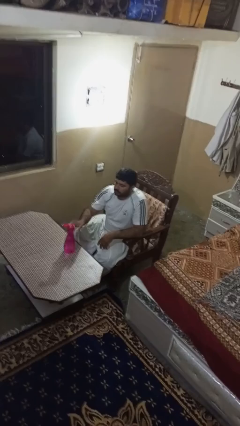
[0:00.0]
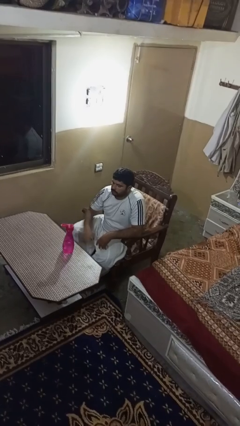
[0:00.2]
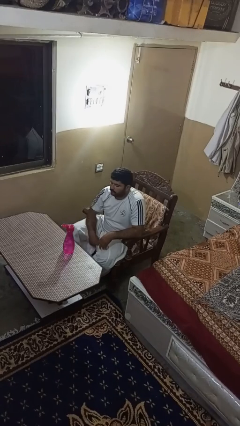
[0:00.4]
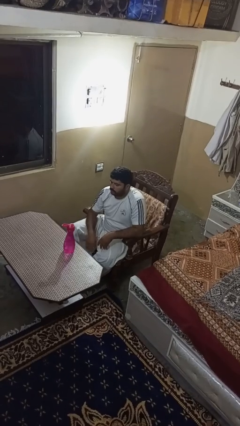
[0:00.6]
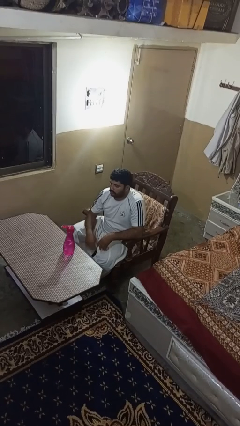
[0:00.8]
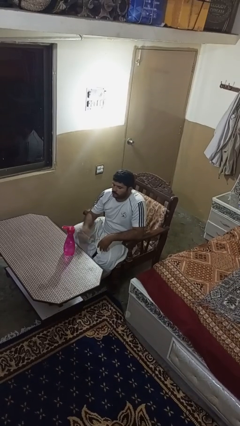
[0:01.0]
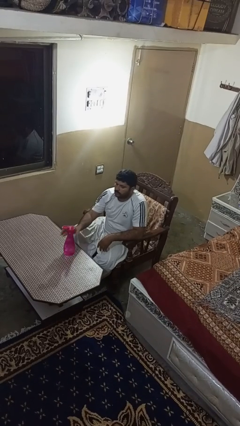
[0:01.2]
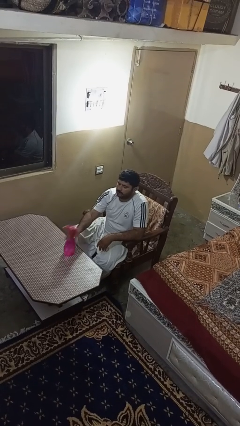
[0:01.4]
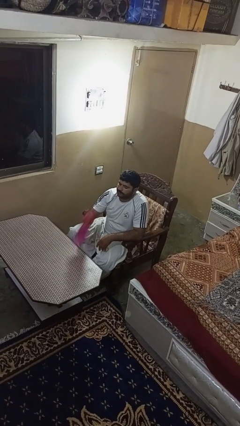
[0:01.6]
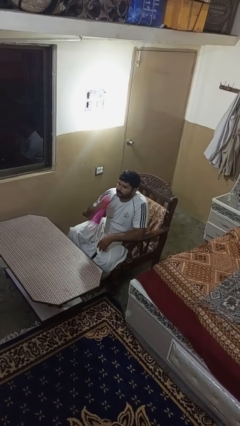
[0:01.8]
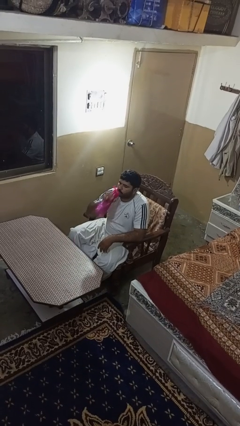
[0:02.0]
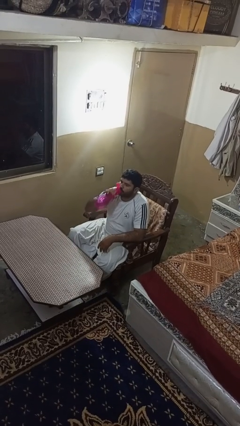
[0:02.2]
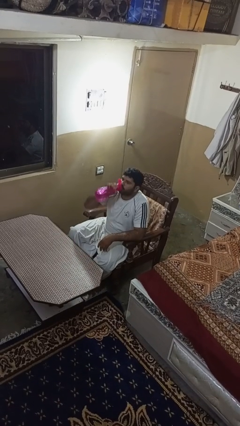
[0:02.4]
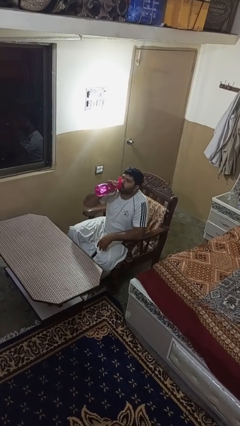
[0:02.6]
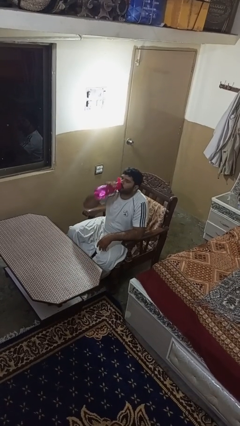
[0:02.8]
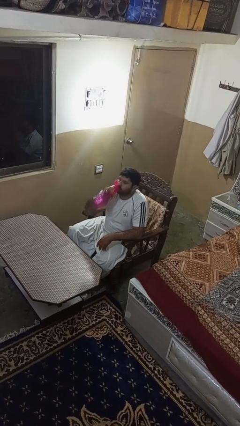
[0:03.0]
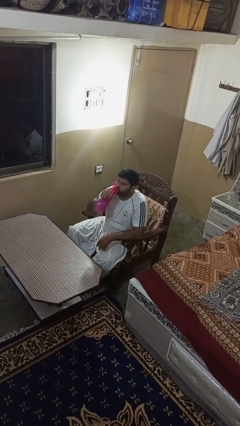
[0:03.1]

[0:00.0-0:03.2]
person drinks from bottle

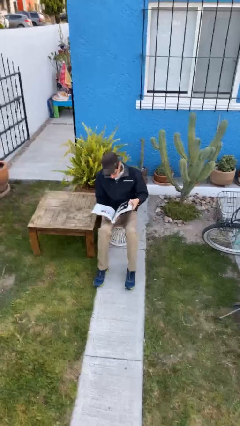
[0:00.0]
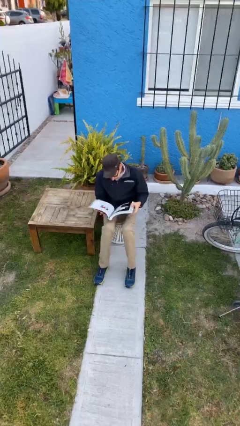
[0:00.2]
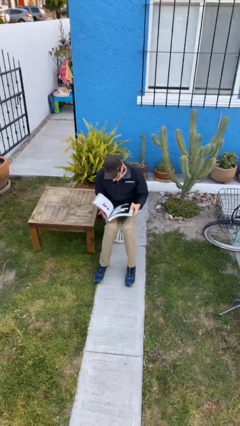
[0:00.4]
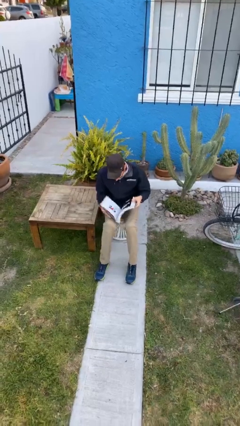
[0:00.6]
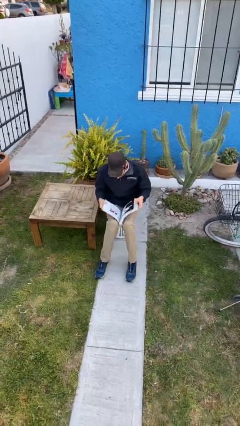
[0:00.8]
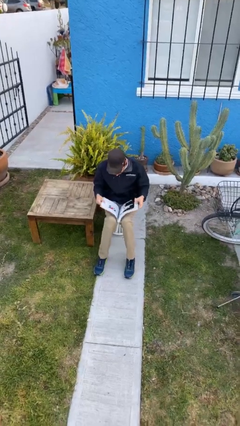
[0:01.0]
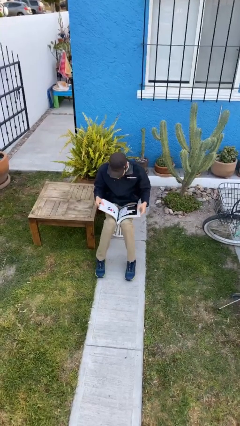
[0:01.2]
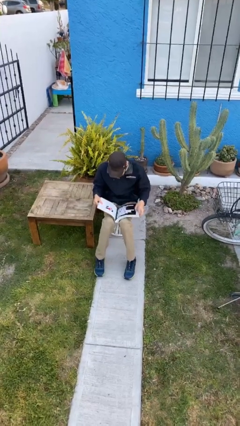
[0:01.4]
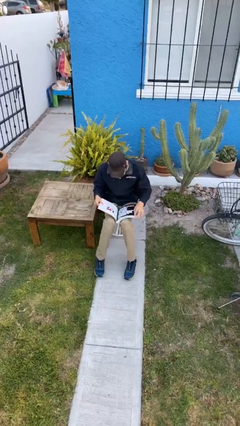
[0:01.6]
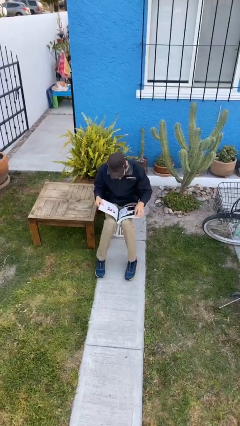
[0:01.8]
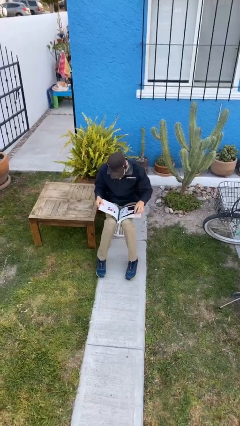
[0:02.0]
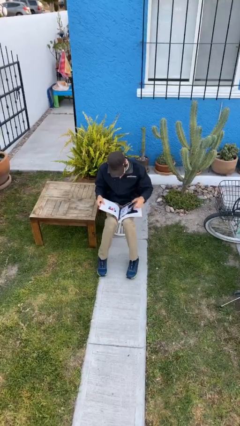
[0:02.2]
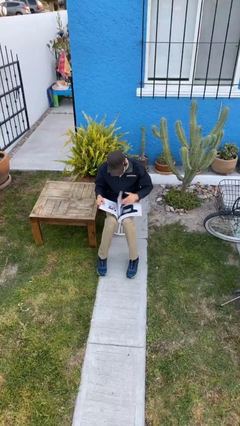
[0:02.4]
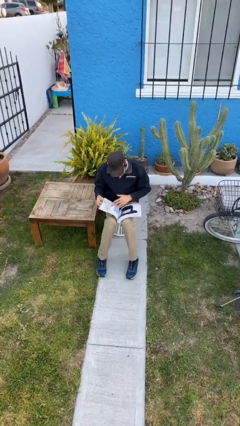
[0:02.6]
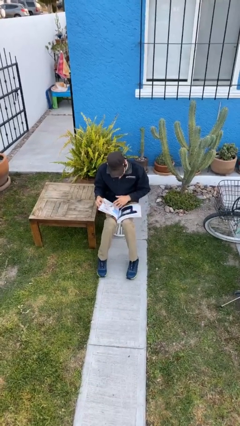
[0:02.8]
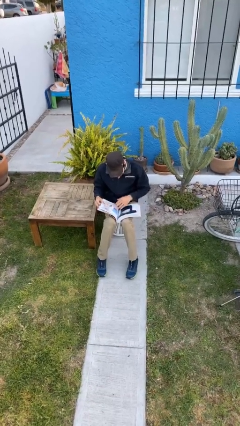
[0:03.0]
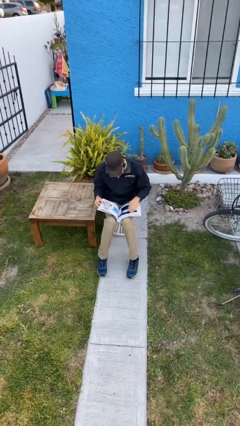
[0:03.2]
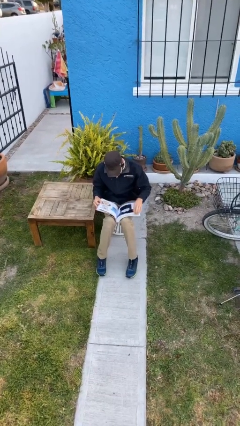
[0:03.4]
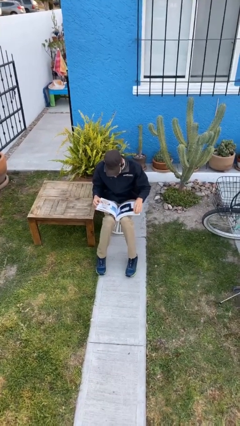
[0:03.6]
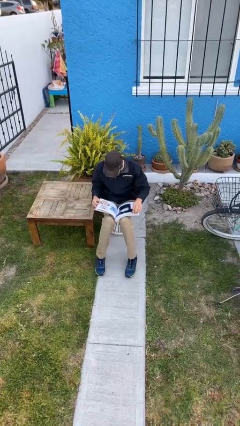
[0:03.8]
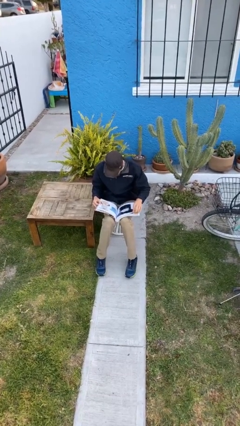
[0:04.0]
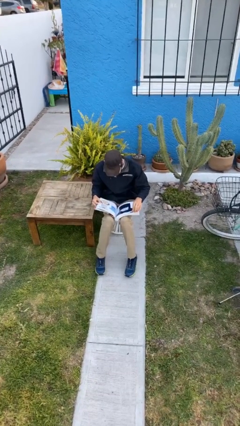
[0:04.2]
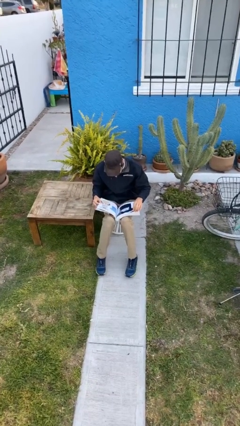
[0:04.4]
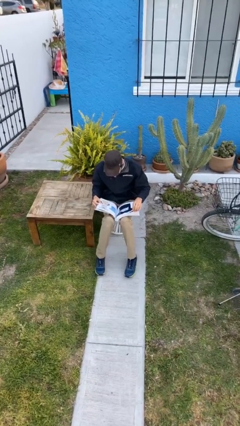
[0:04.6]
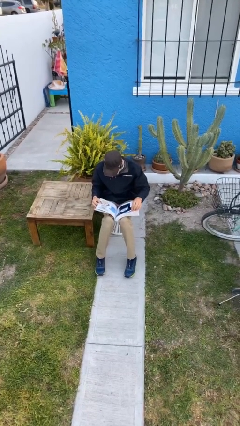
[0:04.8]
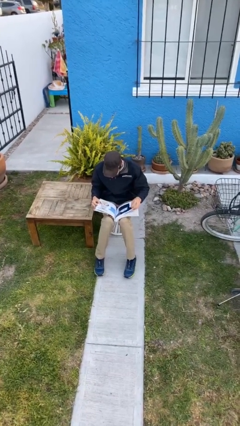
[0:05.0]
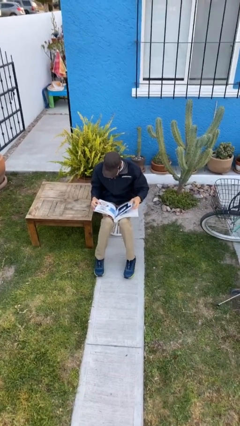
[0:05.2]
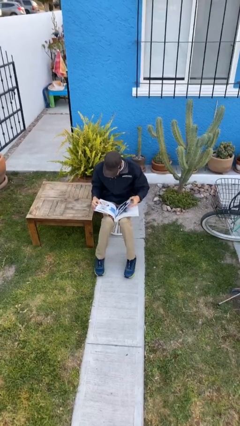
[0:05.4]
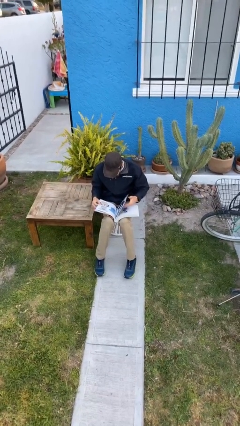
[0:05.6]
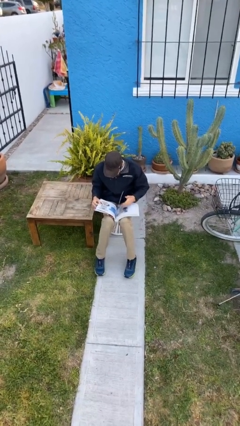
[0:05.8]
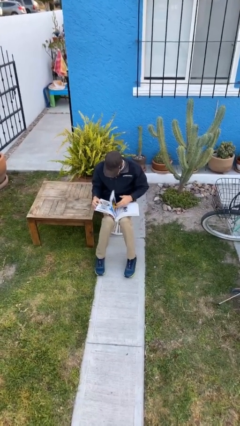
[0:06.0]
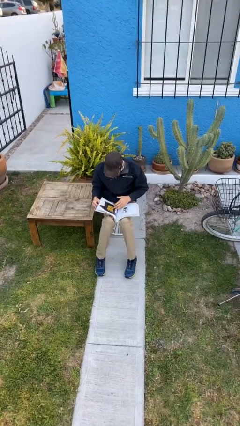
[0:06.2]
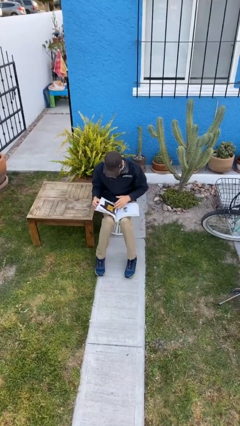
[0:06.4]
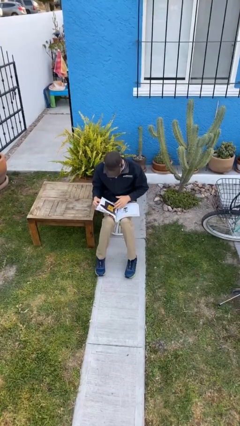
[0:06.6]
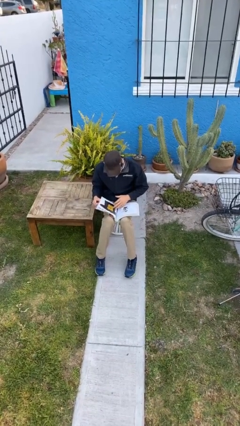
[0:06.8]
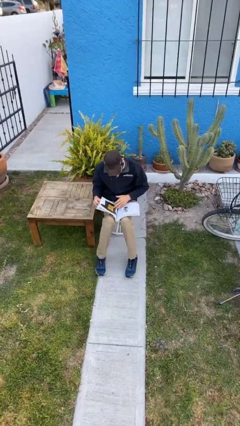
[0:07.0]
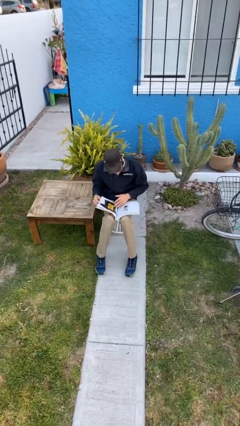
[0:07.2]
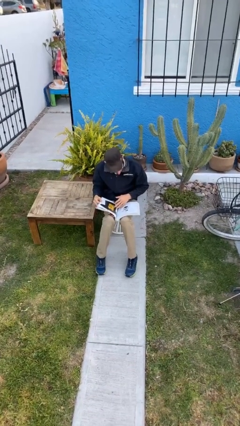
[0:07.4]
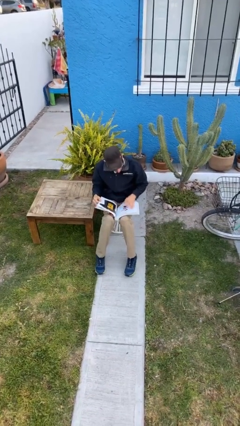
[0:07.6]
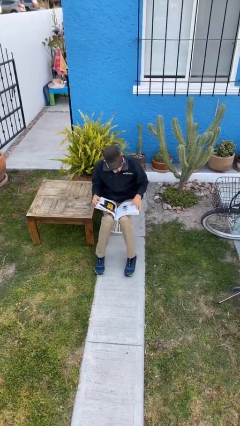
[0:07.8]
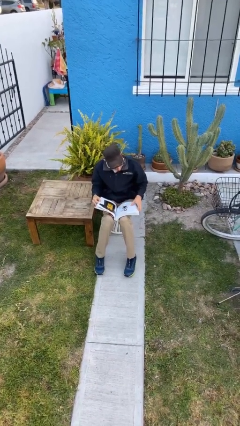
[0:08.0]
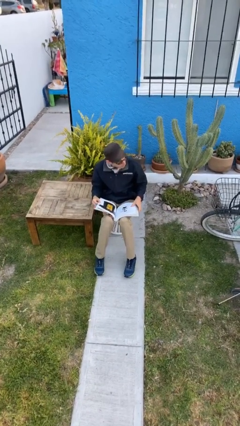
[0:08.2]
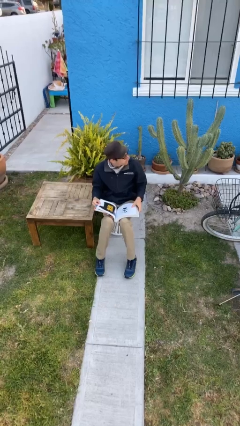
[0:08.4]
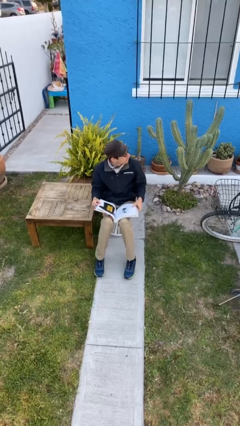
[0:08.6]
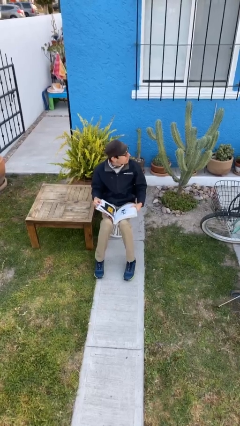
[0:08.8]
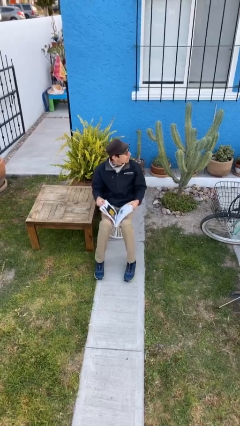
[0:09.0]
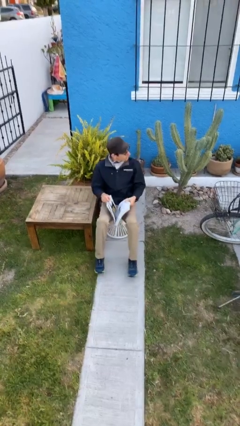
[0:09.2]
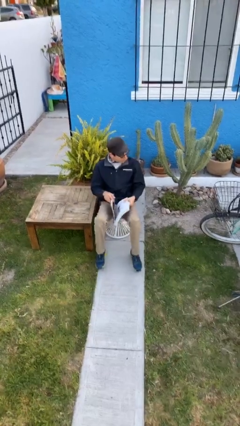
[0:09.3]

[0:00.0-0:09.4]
person reads document

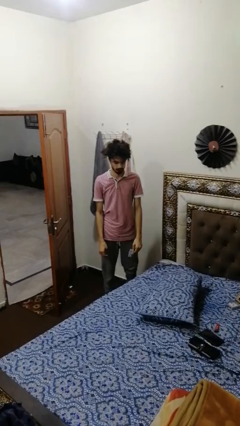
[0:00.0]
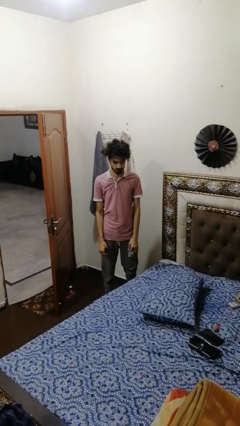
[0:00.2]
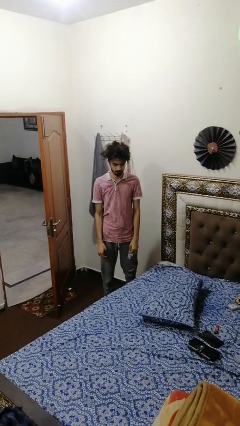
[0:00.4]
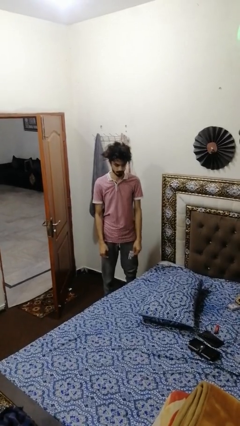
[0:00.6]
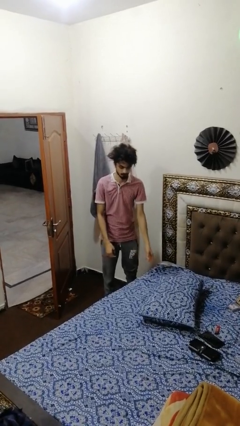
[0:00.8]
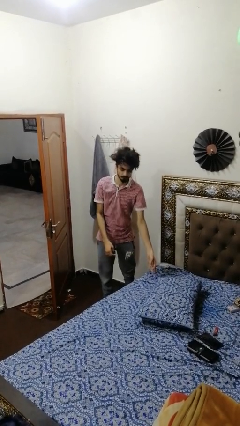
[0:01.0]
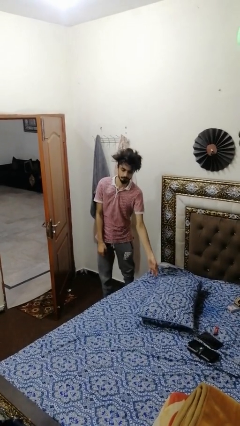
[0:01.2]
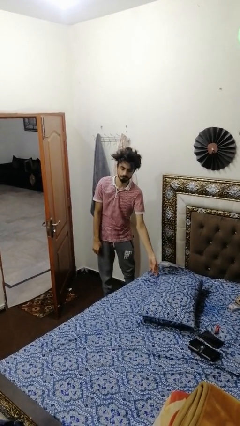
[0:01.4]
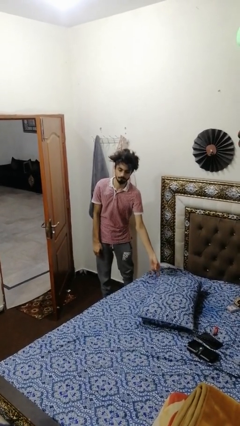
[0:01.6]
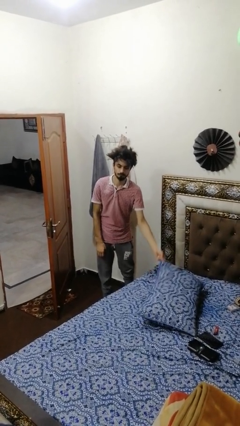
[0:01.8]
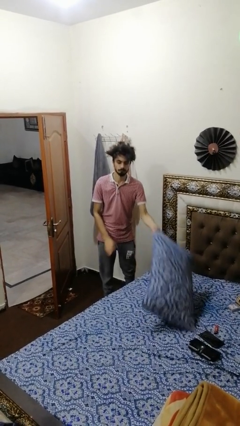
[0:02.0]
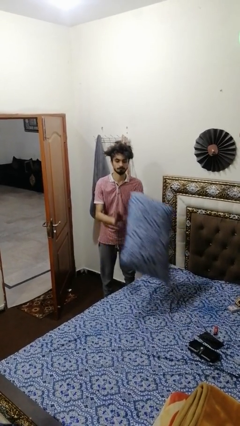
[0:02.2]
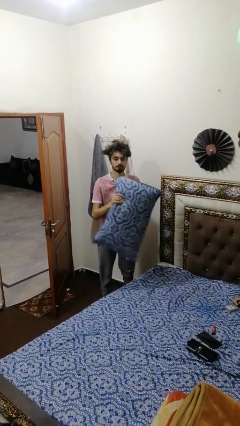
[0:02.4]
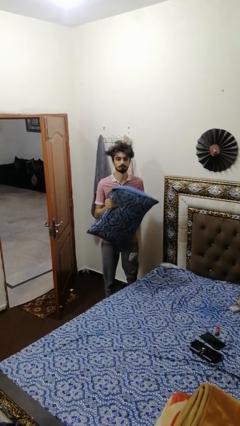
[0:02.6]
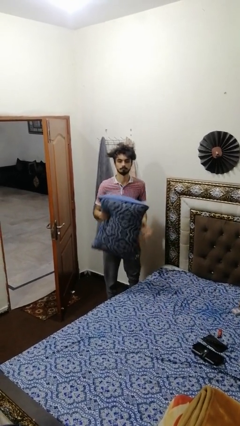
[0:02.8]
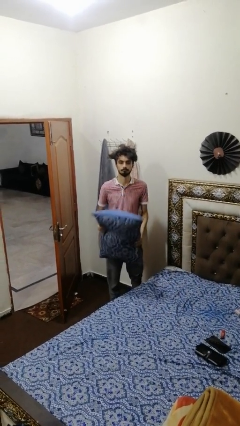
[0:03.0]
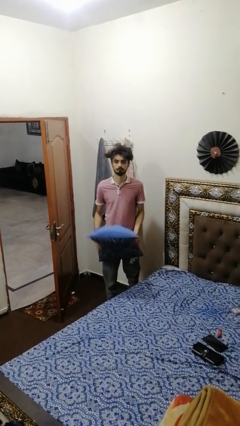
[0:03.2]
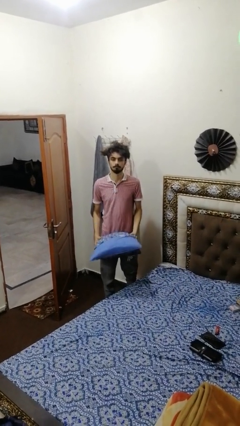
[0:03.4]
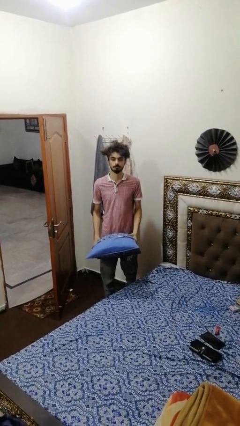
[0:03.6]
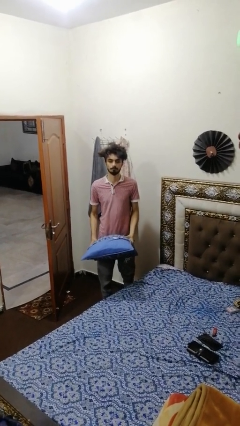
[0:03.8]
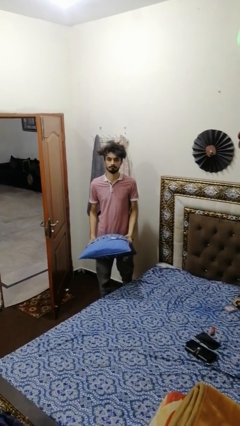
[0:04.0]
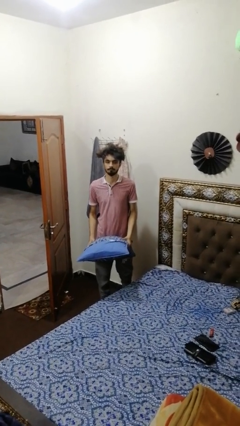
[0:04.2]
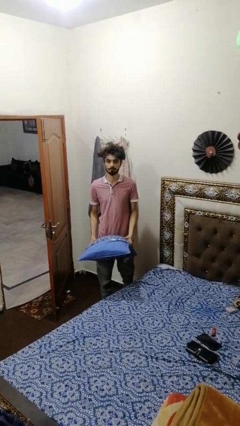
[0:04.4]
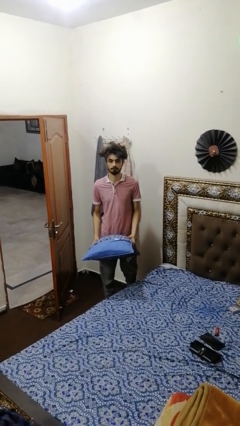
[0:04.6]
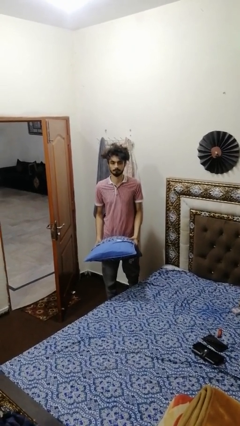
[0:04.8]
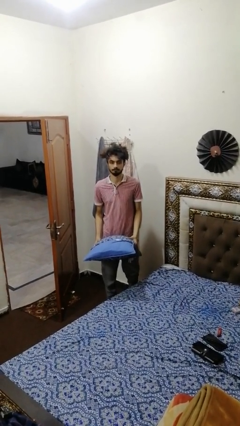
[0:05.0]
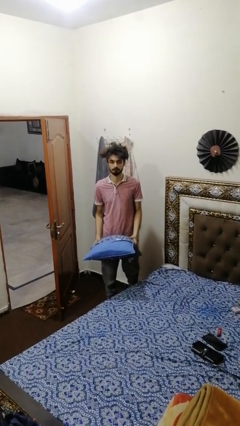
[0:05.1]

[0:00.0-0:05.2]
person picks up object from bed

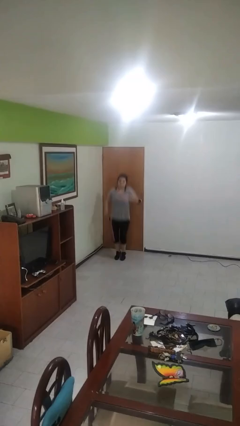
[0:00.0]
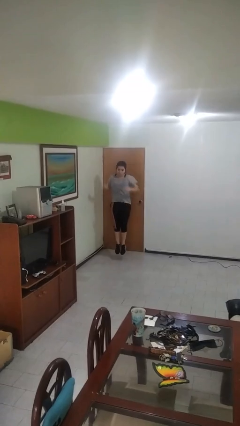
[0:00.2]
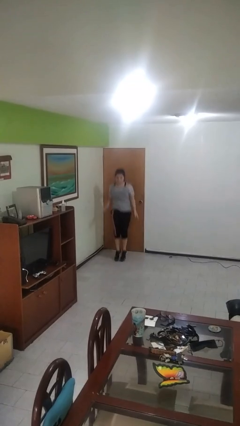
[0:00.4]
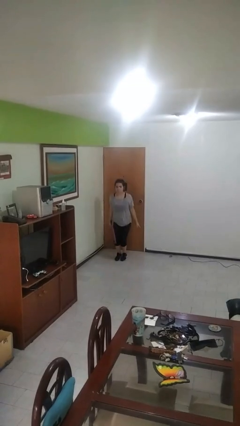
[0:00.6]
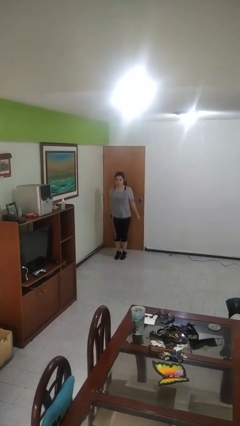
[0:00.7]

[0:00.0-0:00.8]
person jumps
